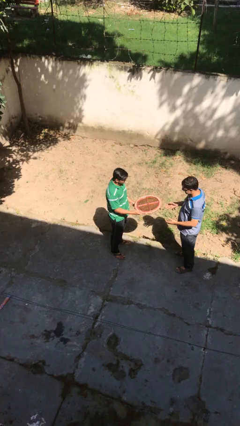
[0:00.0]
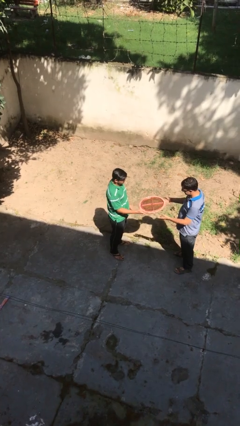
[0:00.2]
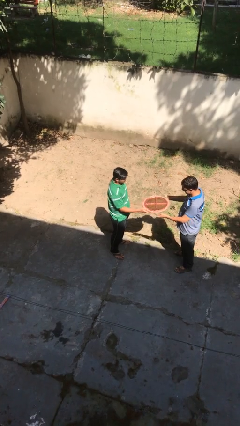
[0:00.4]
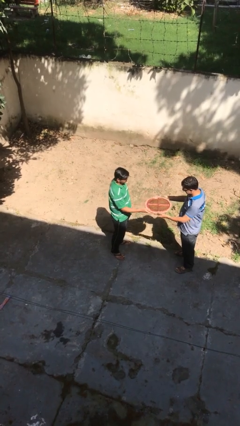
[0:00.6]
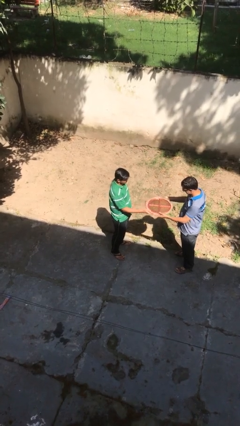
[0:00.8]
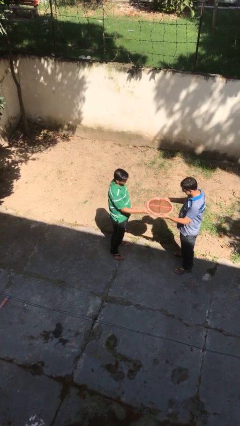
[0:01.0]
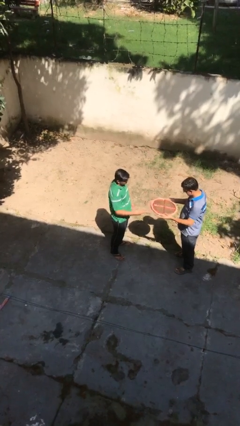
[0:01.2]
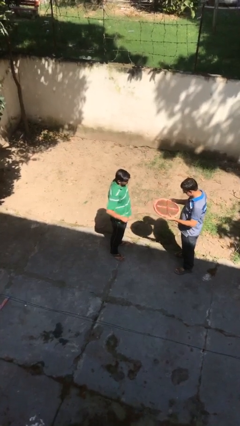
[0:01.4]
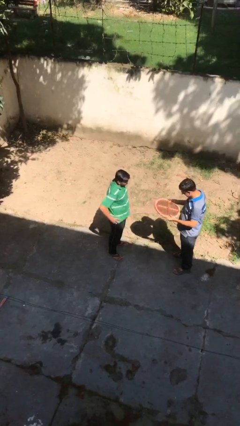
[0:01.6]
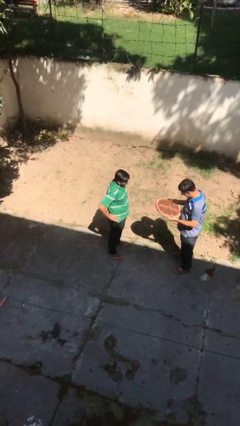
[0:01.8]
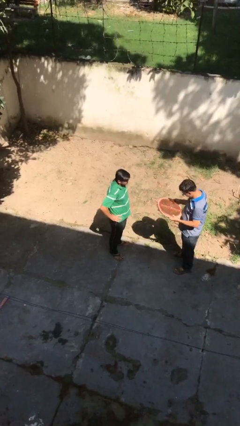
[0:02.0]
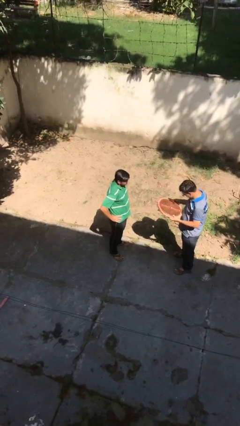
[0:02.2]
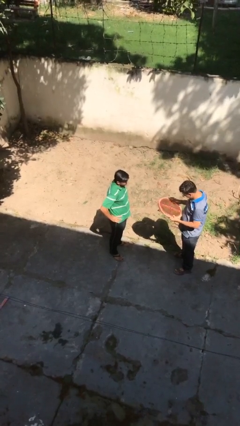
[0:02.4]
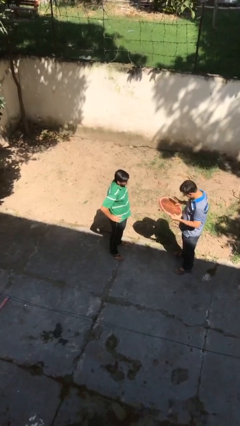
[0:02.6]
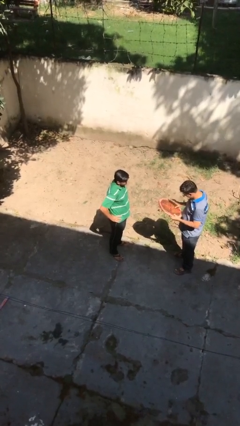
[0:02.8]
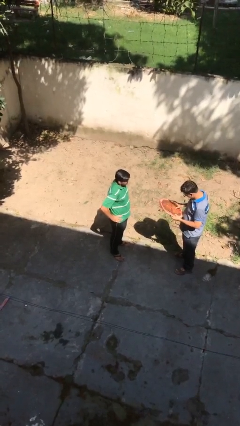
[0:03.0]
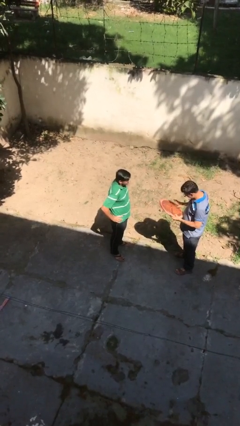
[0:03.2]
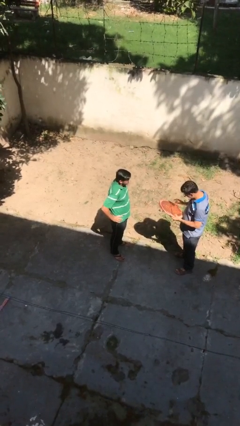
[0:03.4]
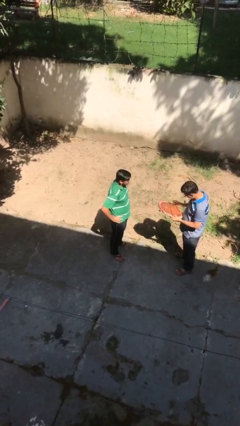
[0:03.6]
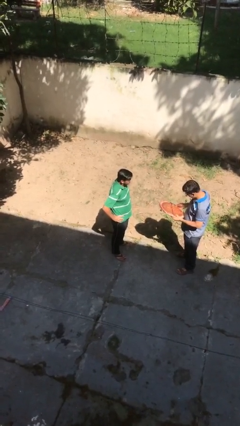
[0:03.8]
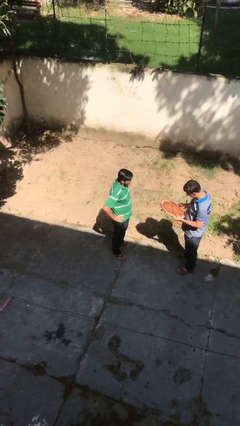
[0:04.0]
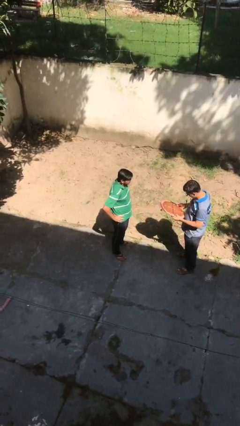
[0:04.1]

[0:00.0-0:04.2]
person transfers object to person

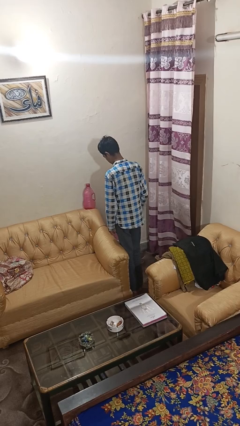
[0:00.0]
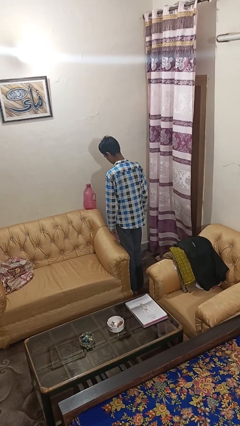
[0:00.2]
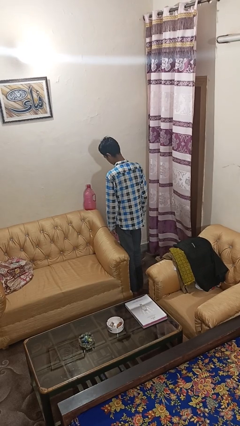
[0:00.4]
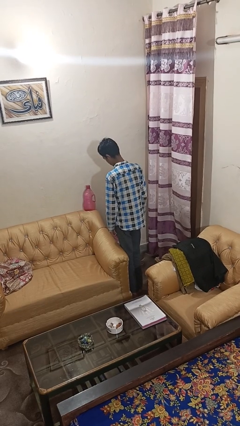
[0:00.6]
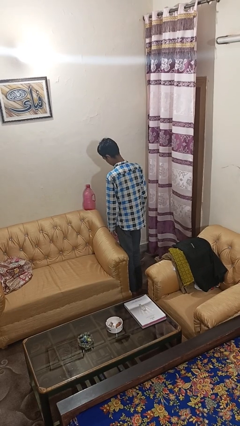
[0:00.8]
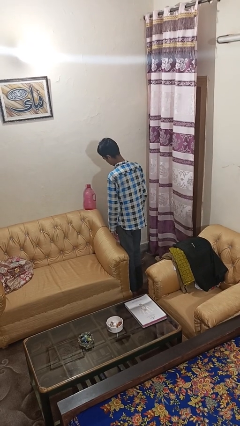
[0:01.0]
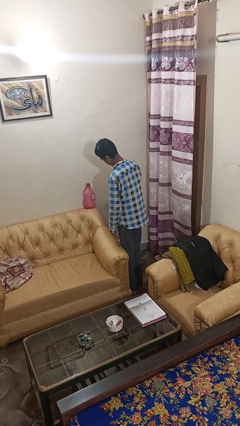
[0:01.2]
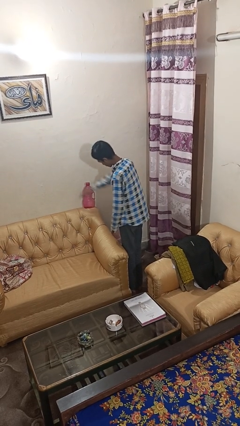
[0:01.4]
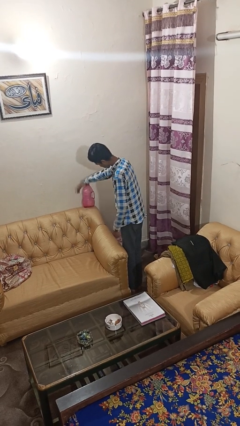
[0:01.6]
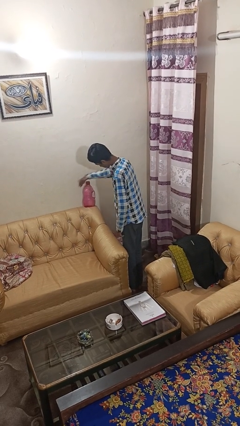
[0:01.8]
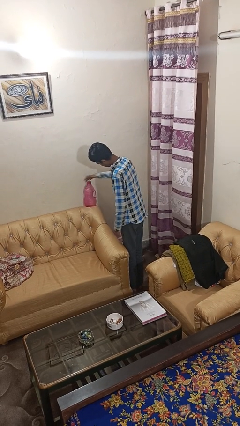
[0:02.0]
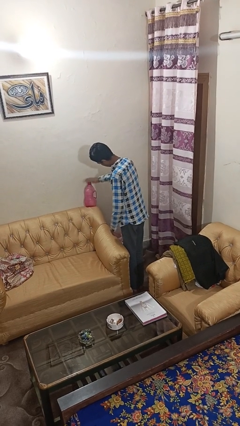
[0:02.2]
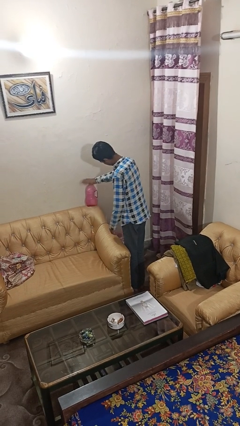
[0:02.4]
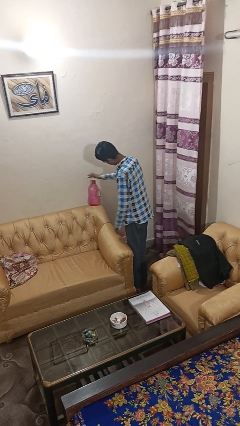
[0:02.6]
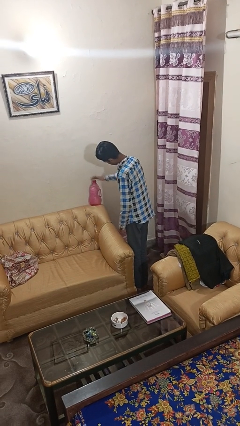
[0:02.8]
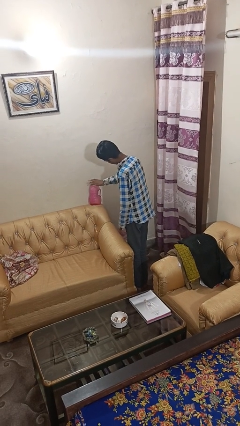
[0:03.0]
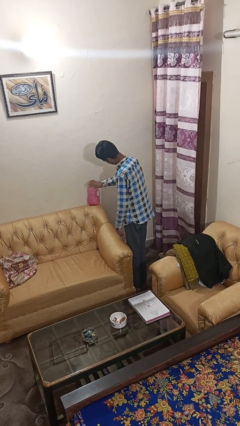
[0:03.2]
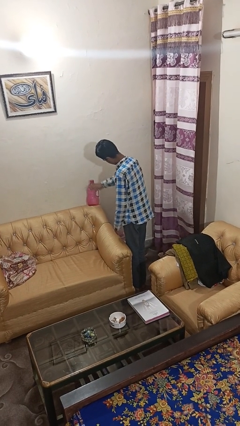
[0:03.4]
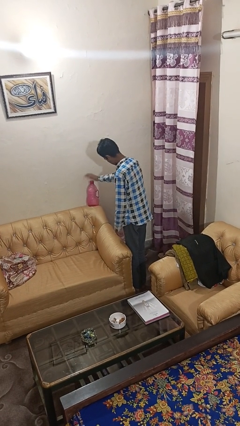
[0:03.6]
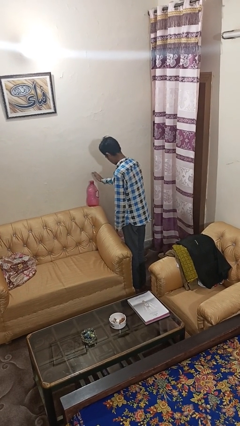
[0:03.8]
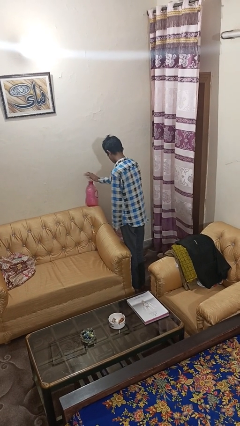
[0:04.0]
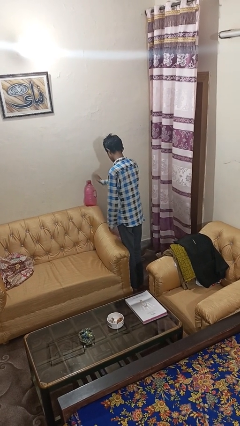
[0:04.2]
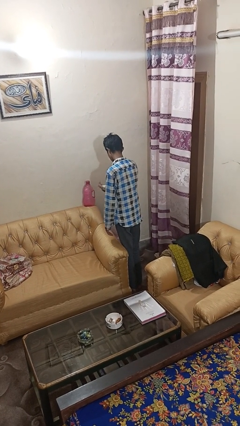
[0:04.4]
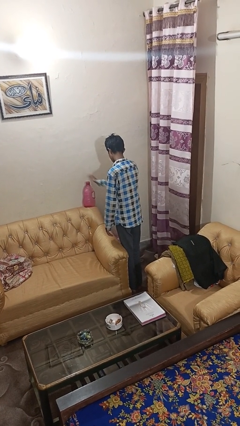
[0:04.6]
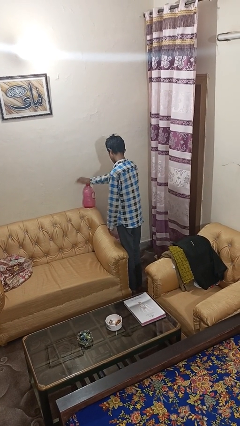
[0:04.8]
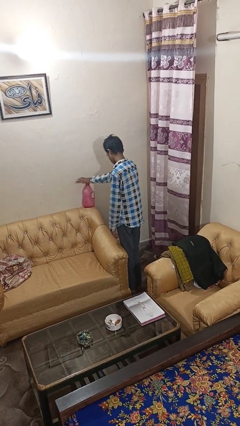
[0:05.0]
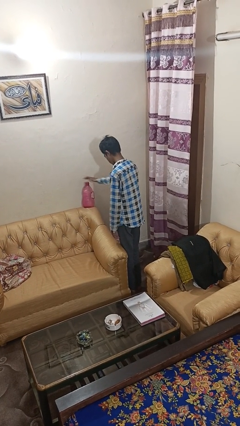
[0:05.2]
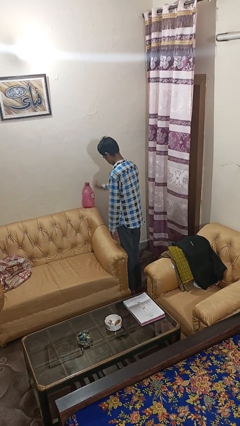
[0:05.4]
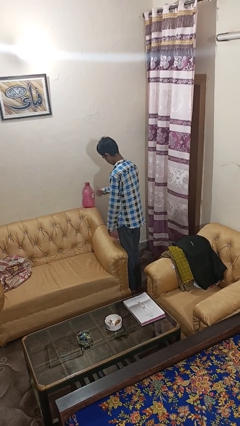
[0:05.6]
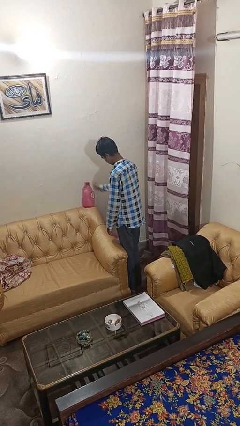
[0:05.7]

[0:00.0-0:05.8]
person waves hand over object

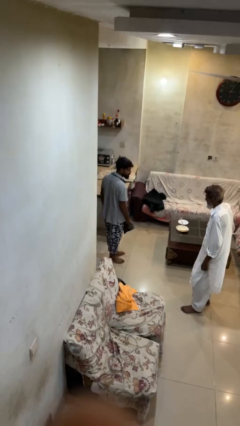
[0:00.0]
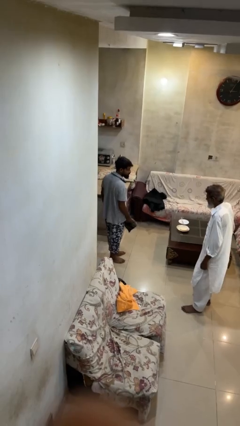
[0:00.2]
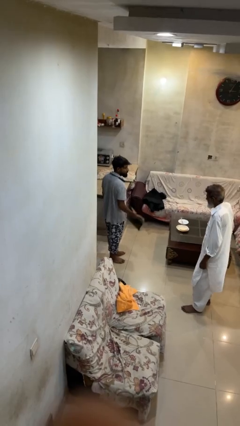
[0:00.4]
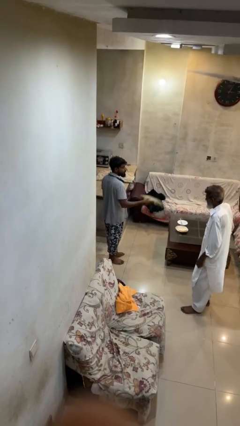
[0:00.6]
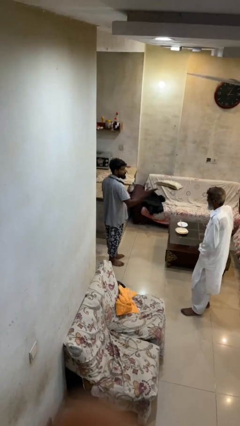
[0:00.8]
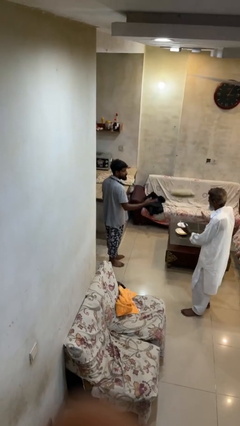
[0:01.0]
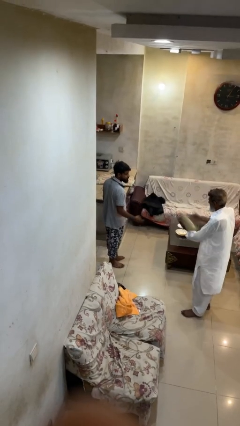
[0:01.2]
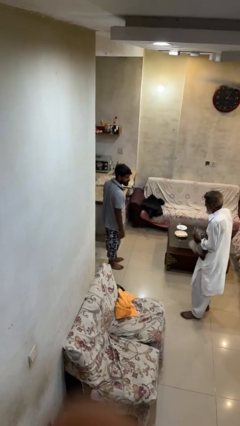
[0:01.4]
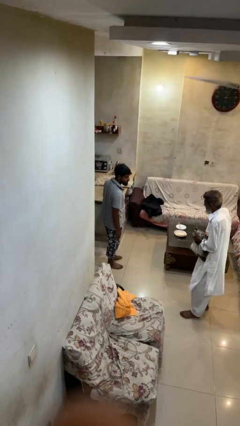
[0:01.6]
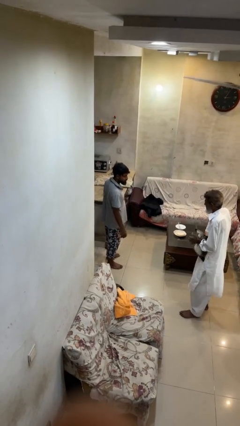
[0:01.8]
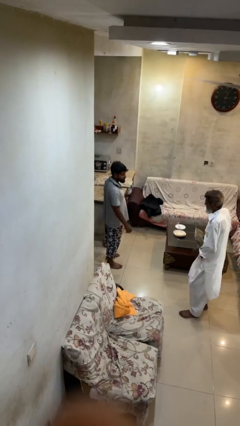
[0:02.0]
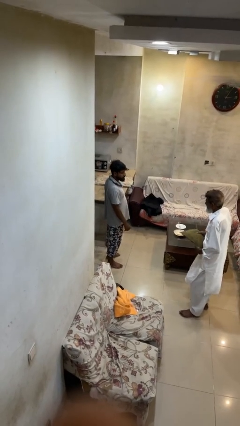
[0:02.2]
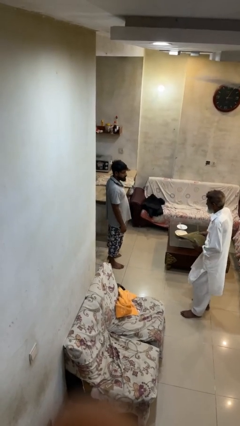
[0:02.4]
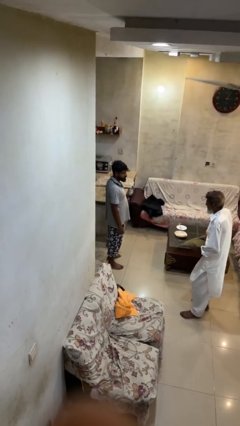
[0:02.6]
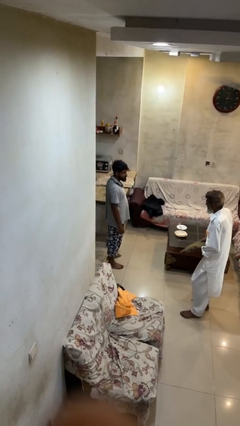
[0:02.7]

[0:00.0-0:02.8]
person throws object to person

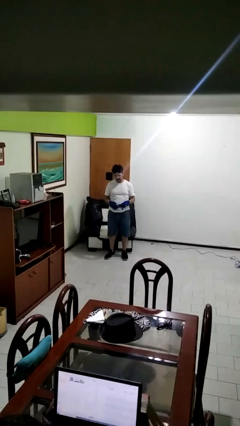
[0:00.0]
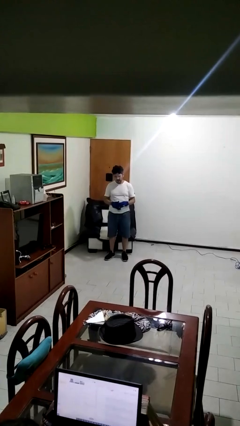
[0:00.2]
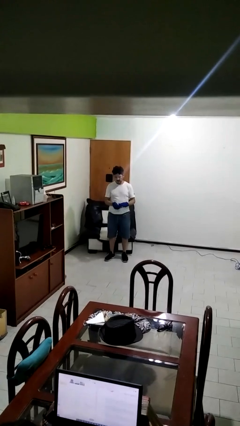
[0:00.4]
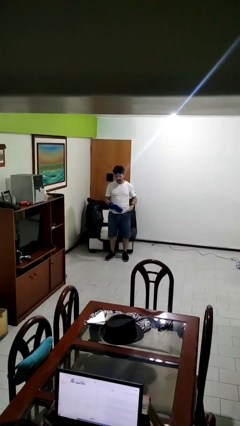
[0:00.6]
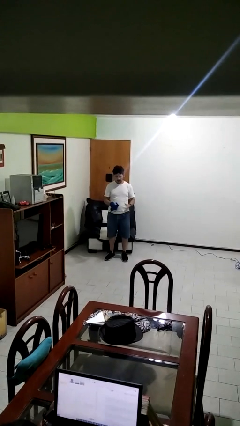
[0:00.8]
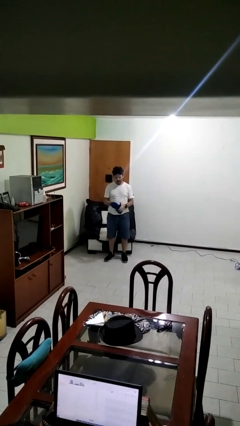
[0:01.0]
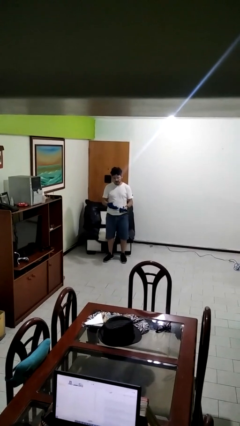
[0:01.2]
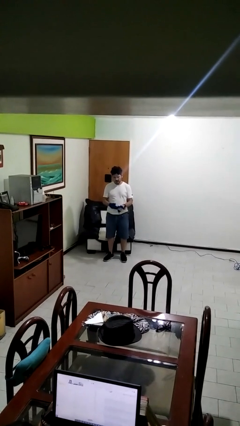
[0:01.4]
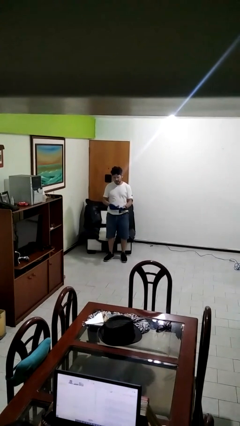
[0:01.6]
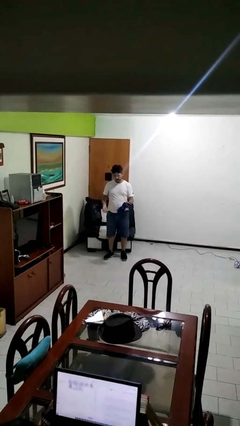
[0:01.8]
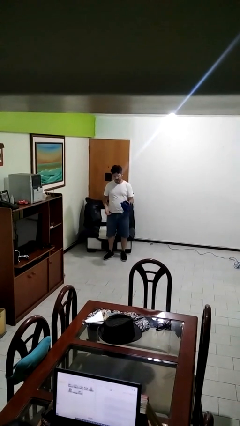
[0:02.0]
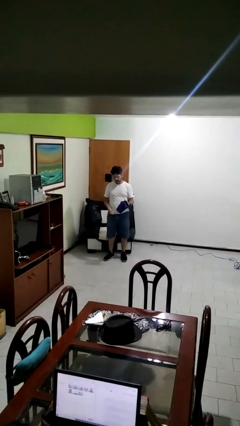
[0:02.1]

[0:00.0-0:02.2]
person takes off gloves

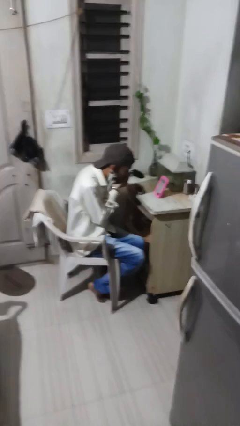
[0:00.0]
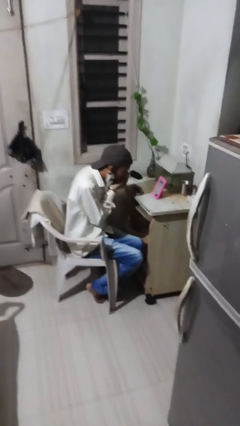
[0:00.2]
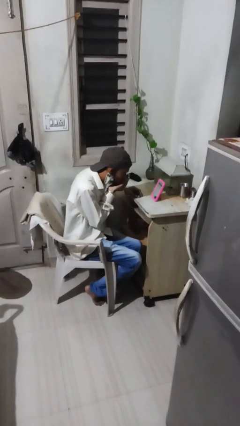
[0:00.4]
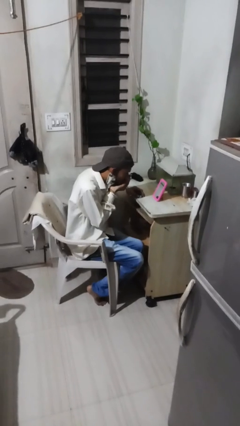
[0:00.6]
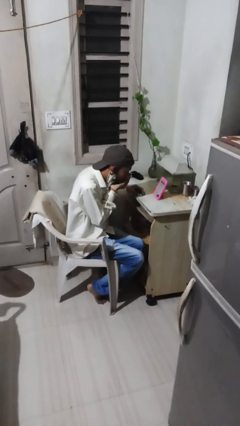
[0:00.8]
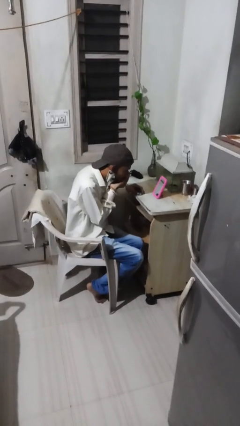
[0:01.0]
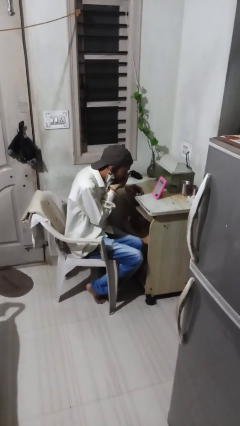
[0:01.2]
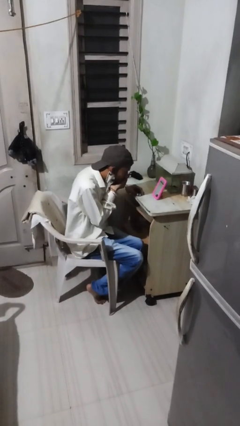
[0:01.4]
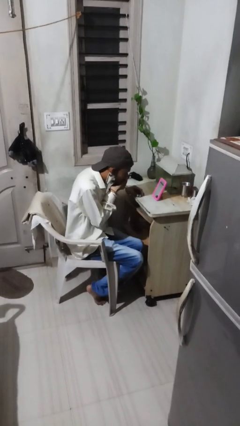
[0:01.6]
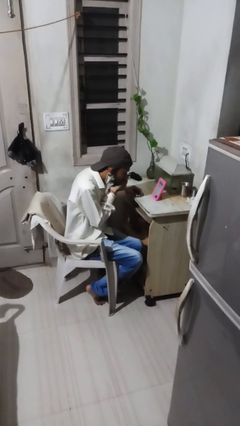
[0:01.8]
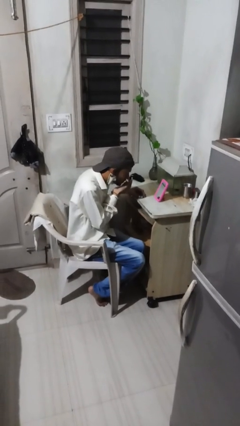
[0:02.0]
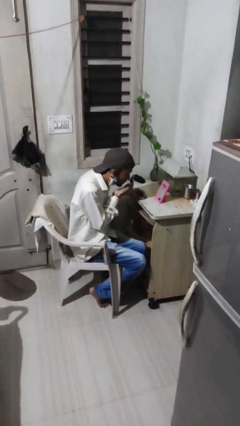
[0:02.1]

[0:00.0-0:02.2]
person applies eye makeup

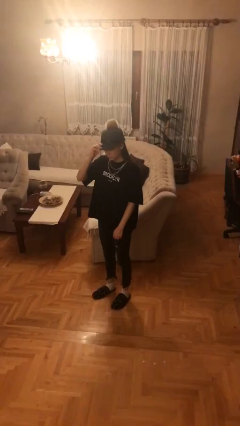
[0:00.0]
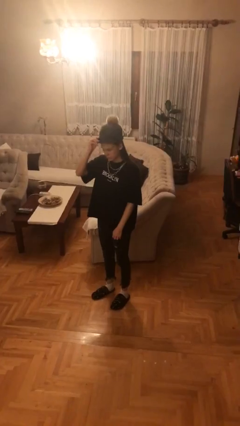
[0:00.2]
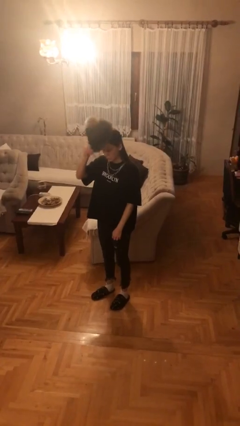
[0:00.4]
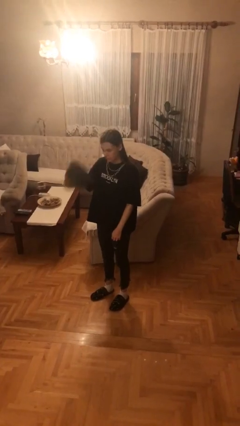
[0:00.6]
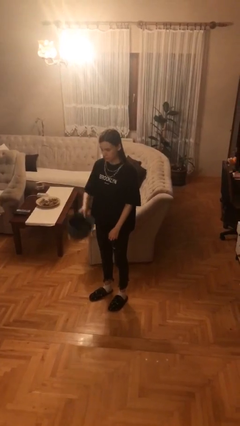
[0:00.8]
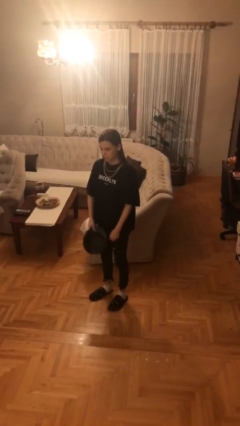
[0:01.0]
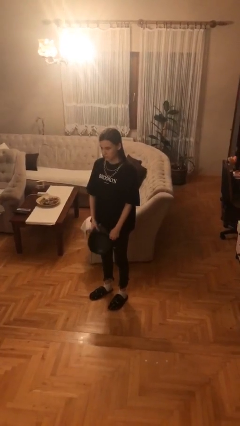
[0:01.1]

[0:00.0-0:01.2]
person takes off hat
